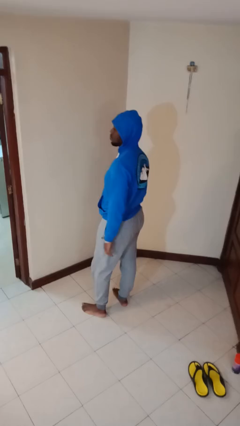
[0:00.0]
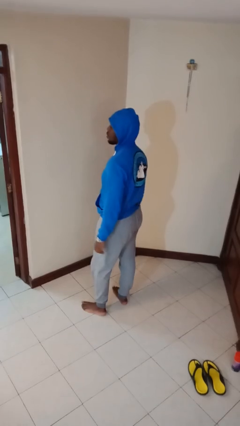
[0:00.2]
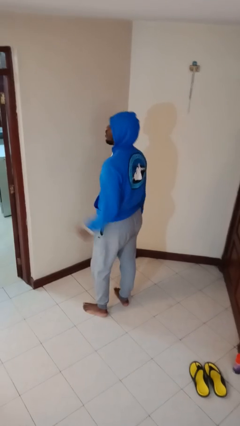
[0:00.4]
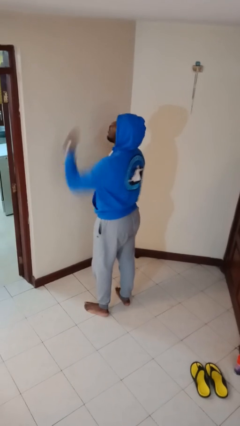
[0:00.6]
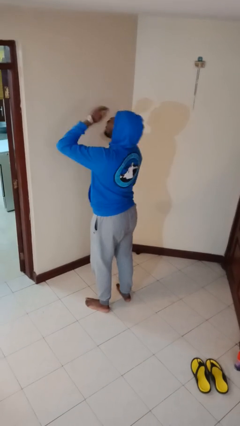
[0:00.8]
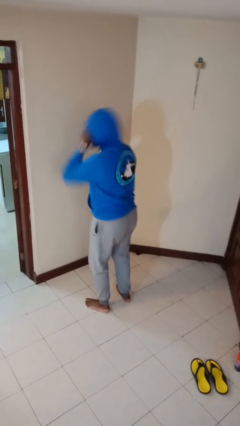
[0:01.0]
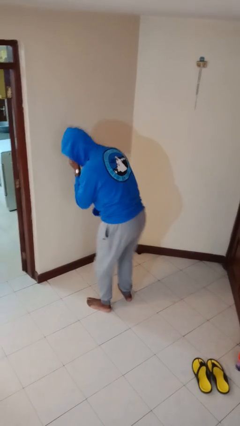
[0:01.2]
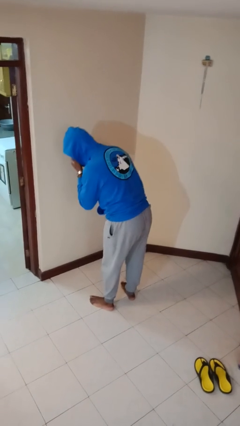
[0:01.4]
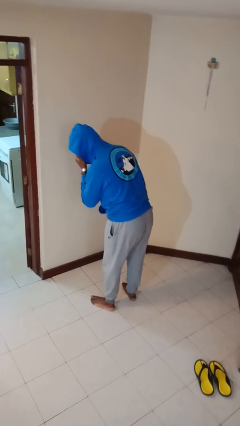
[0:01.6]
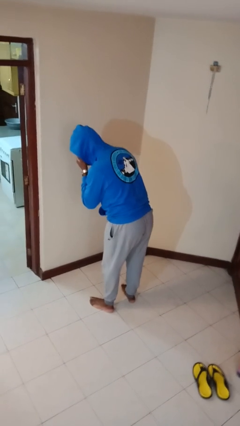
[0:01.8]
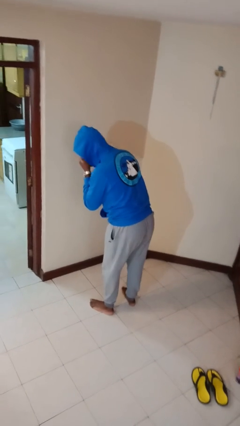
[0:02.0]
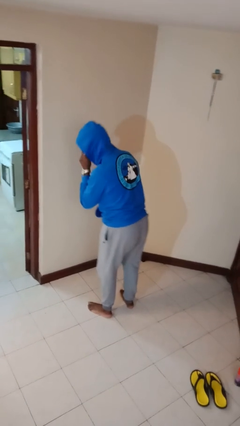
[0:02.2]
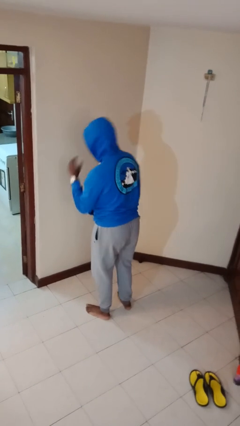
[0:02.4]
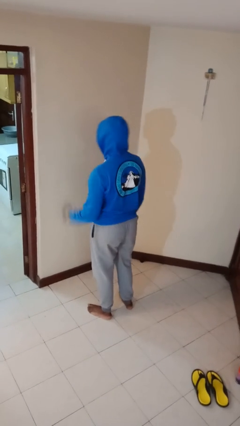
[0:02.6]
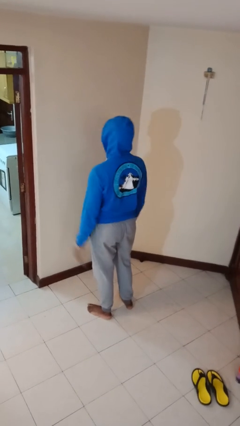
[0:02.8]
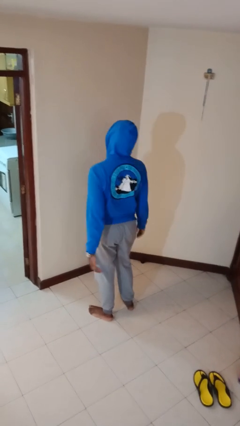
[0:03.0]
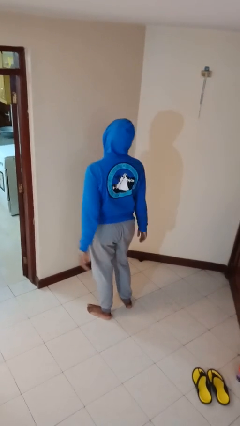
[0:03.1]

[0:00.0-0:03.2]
person sneezes into hand

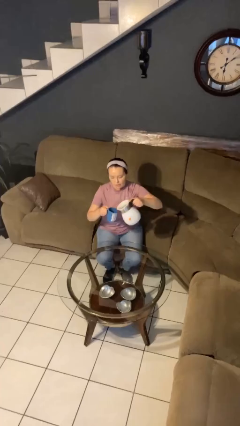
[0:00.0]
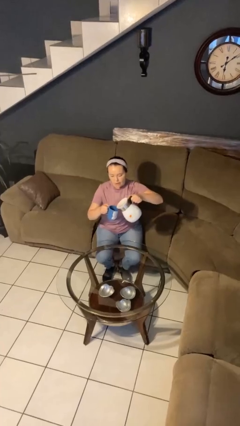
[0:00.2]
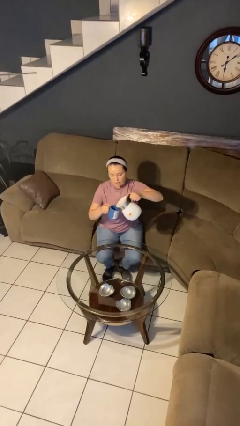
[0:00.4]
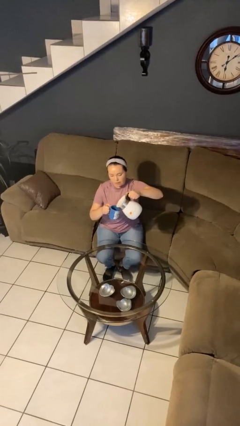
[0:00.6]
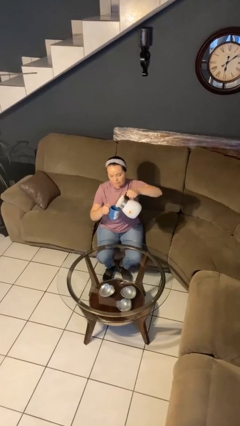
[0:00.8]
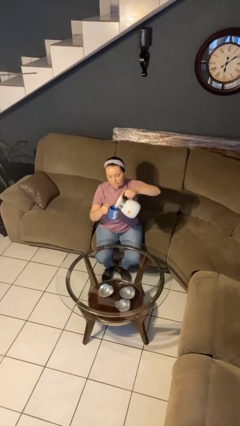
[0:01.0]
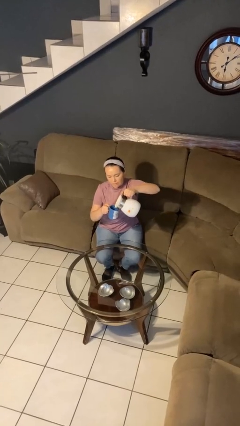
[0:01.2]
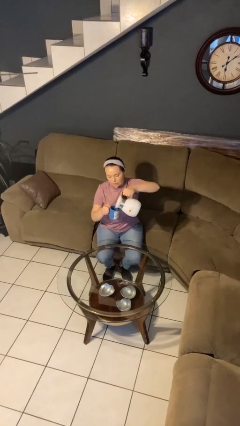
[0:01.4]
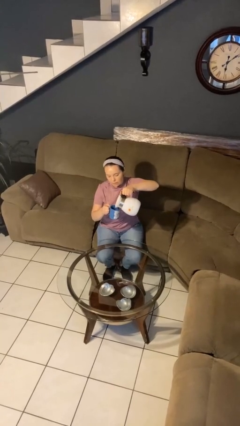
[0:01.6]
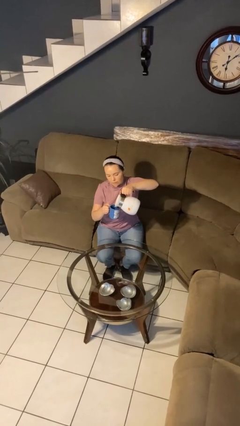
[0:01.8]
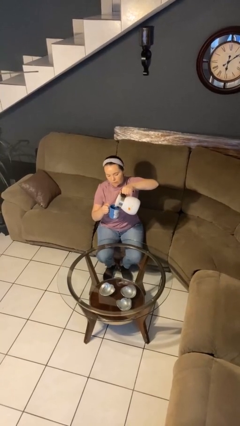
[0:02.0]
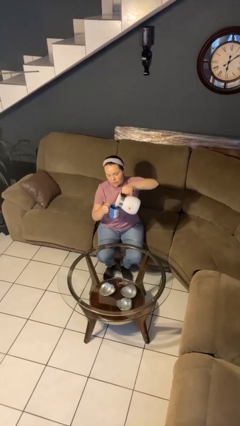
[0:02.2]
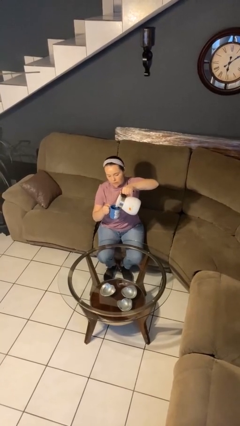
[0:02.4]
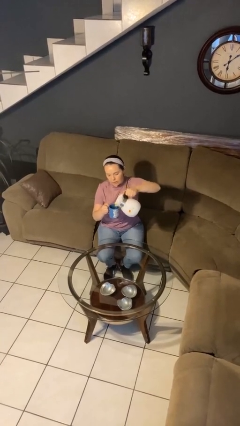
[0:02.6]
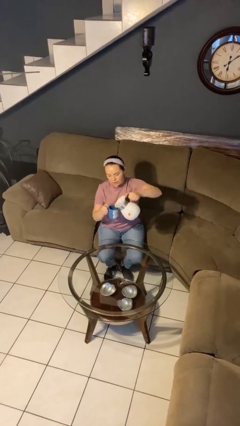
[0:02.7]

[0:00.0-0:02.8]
person pours coffee into mug

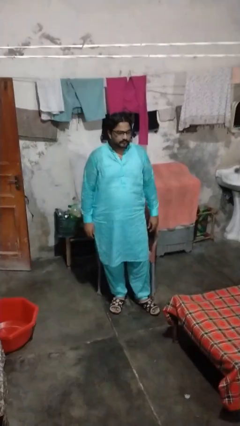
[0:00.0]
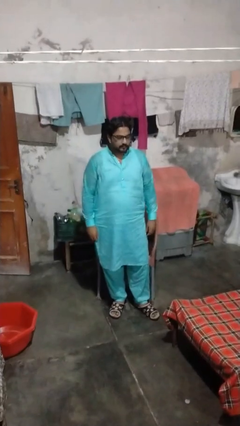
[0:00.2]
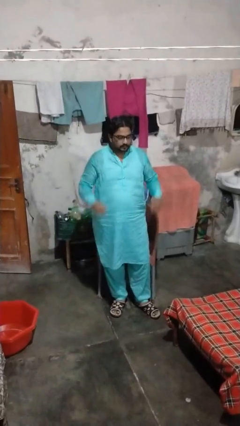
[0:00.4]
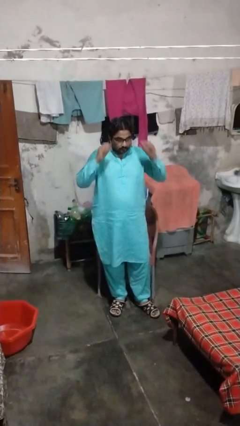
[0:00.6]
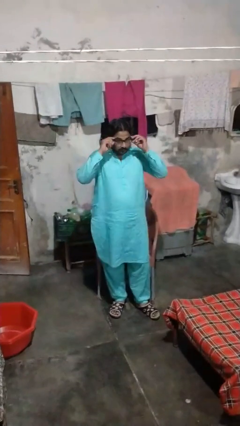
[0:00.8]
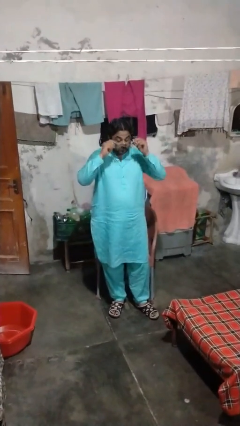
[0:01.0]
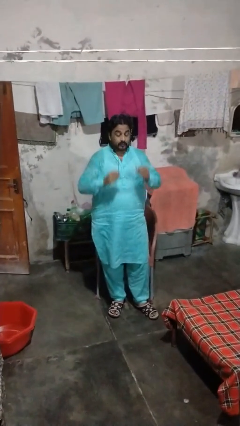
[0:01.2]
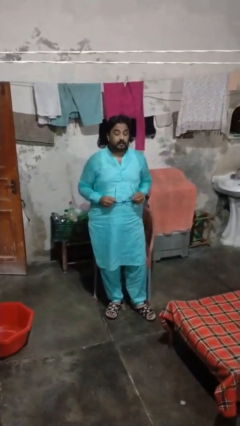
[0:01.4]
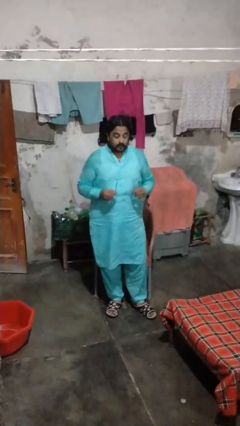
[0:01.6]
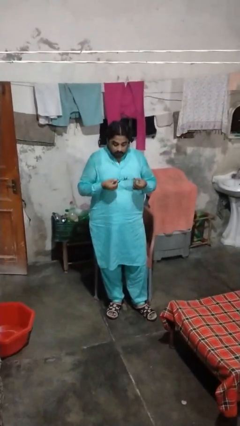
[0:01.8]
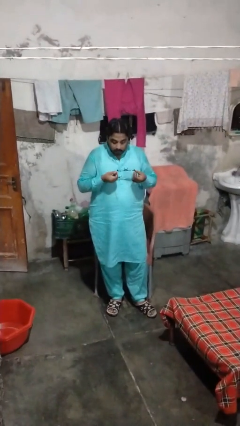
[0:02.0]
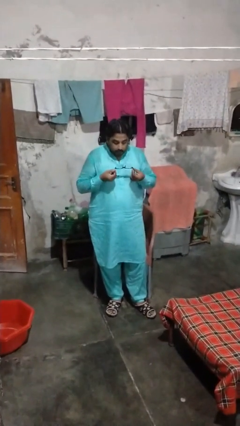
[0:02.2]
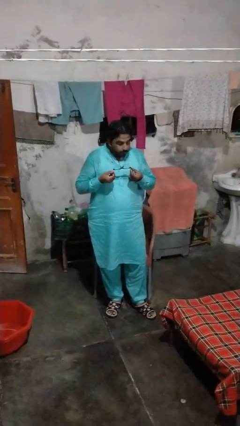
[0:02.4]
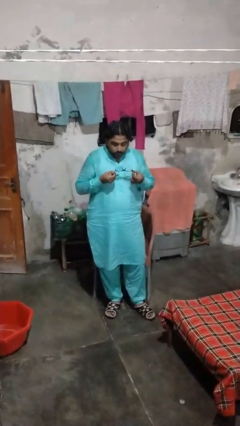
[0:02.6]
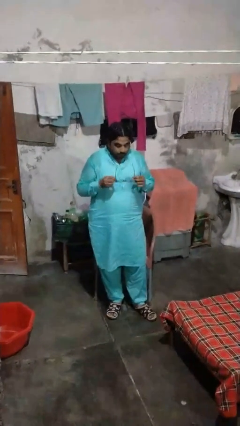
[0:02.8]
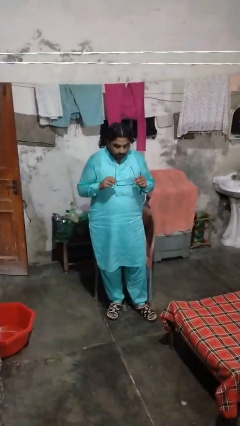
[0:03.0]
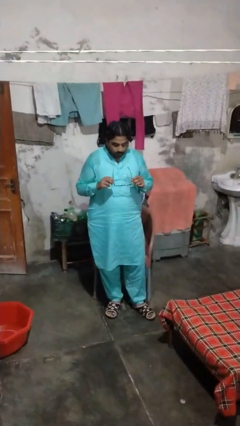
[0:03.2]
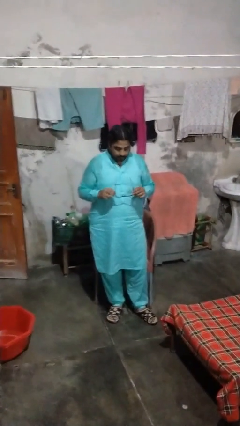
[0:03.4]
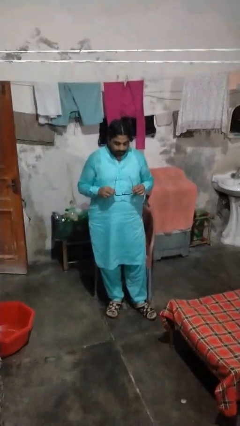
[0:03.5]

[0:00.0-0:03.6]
person takes off glasses

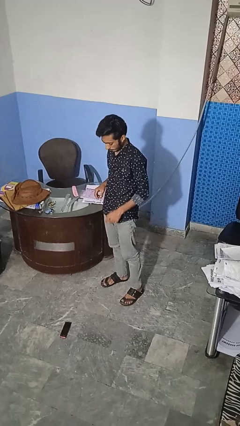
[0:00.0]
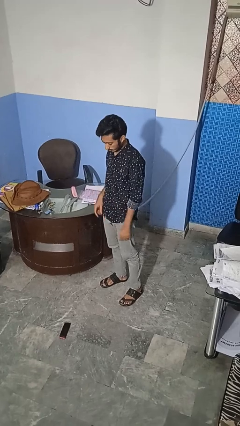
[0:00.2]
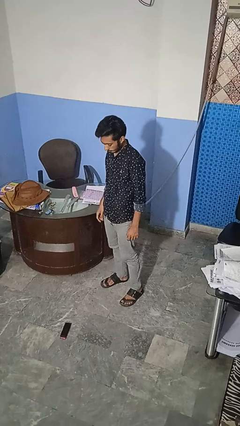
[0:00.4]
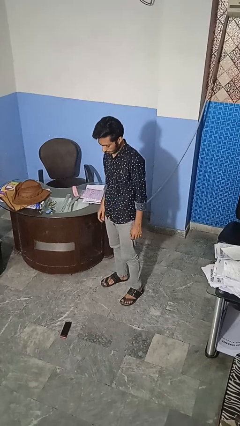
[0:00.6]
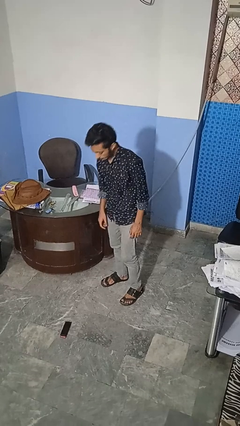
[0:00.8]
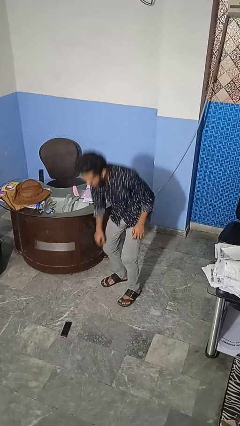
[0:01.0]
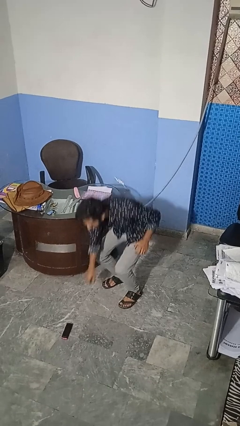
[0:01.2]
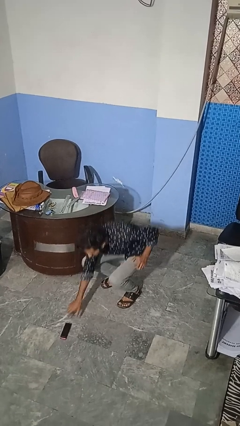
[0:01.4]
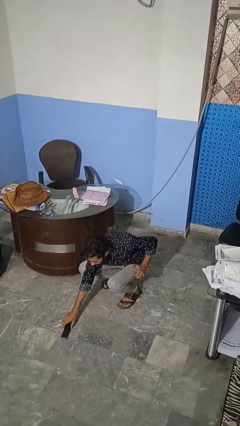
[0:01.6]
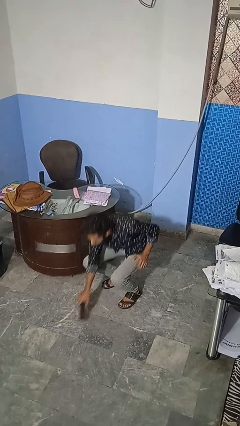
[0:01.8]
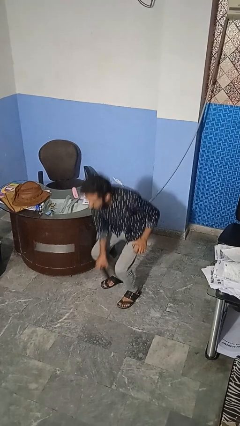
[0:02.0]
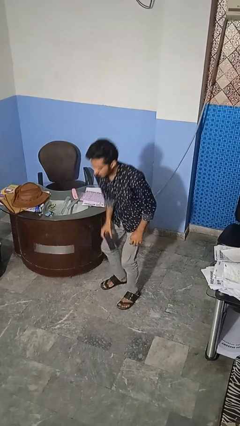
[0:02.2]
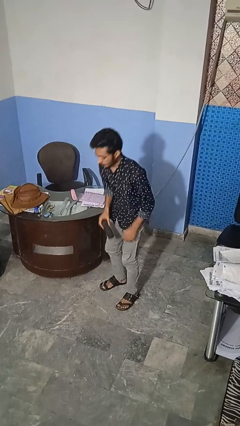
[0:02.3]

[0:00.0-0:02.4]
person picks up object from floor

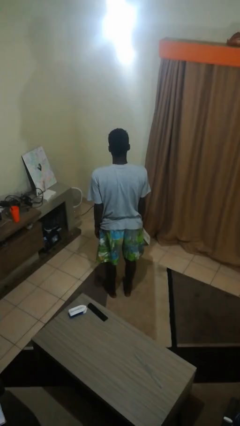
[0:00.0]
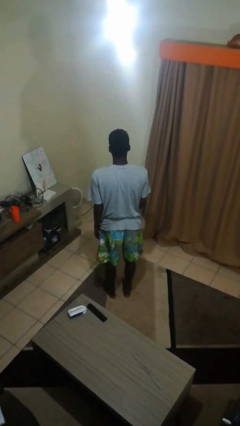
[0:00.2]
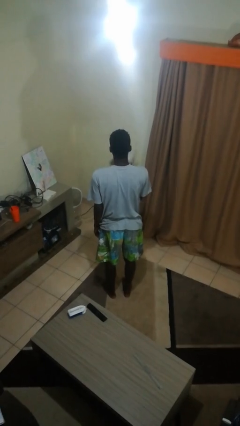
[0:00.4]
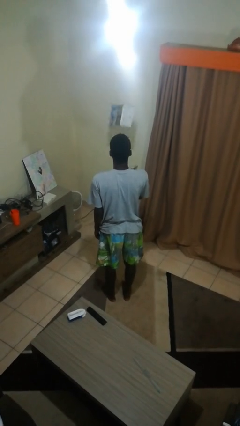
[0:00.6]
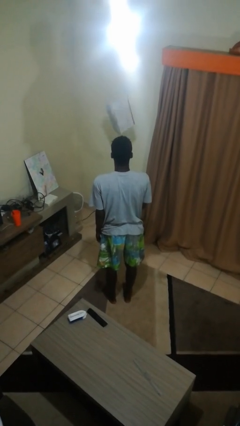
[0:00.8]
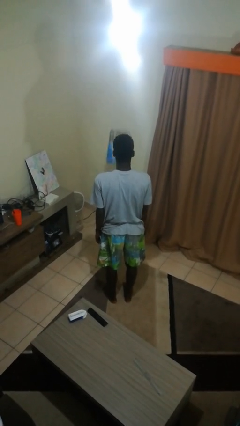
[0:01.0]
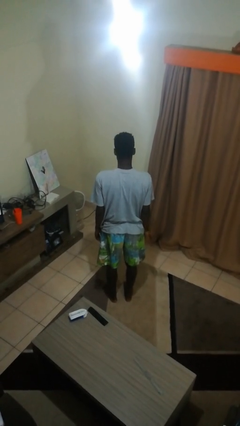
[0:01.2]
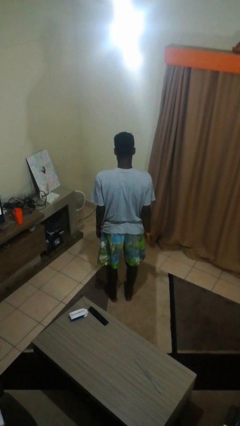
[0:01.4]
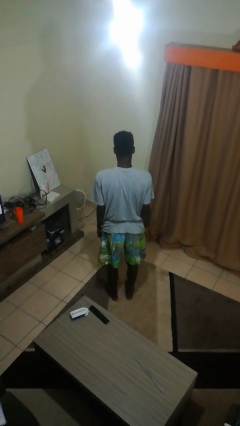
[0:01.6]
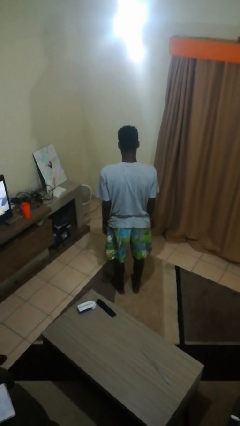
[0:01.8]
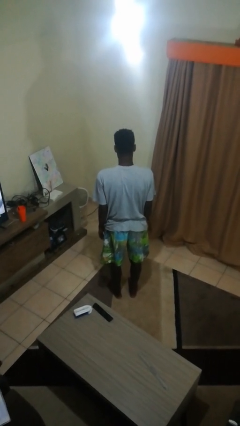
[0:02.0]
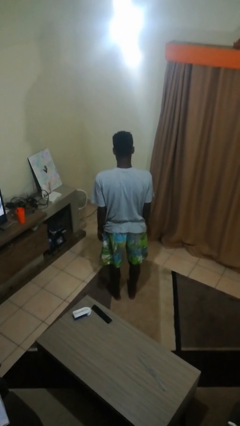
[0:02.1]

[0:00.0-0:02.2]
person throws object into air

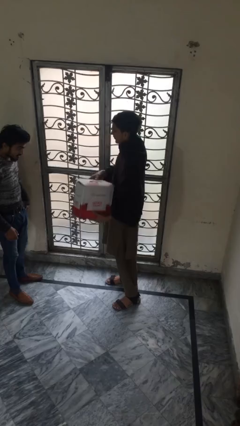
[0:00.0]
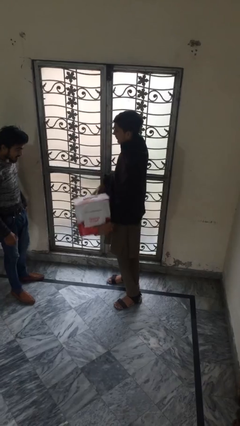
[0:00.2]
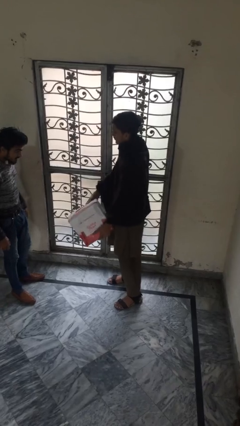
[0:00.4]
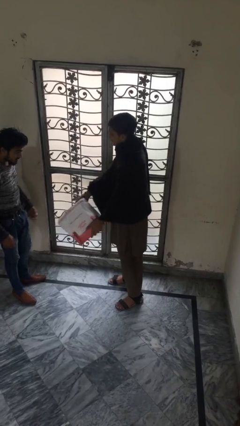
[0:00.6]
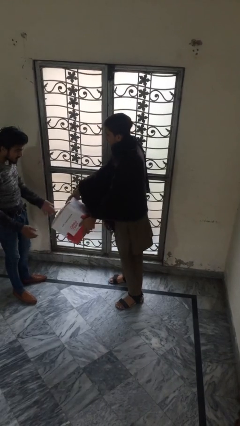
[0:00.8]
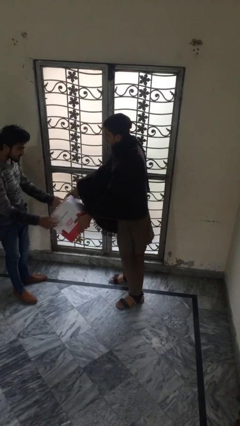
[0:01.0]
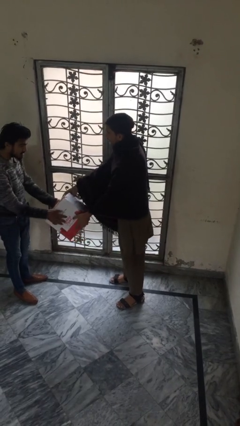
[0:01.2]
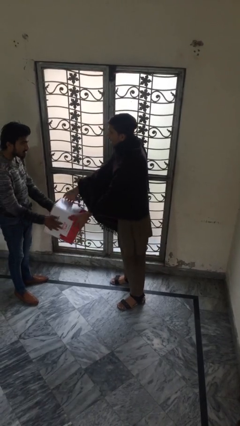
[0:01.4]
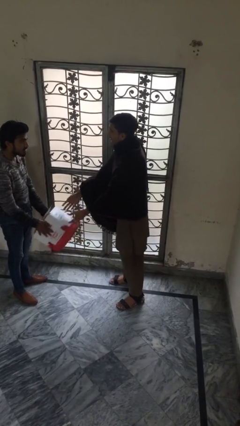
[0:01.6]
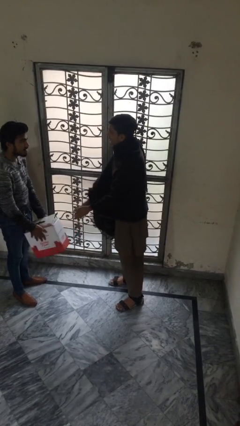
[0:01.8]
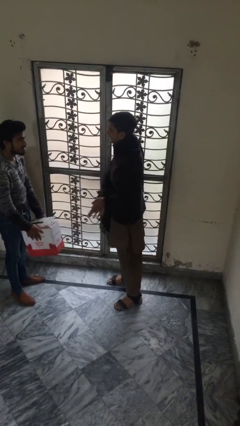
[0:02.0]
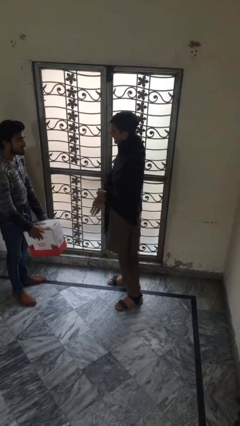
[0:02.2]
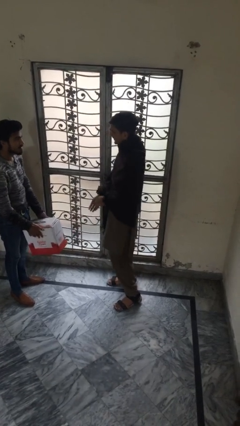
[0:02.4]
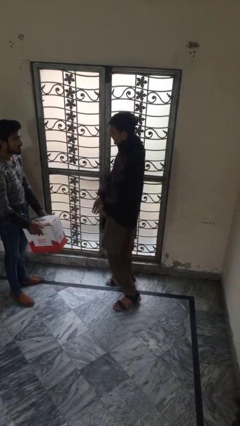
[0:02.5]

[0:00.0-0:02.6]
person transfers object to person

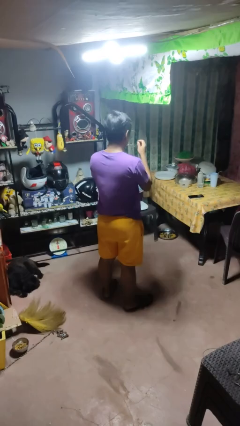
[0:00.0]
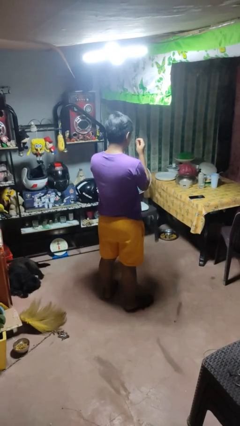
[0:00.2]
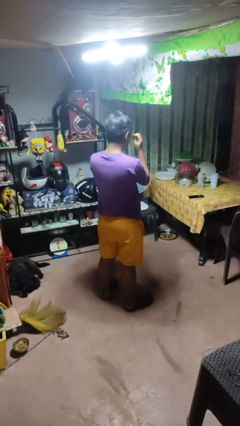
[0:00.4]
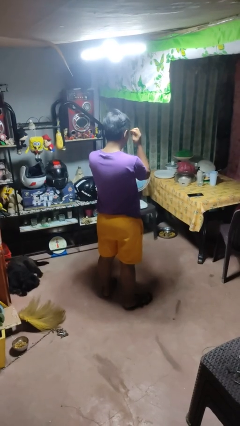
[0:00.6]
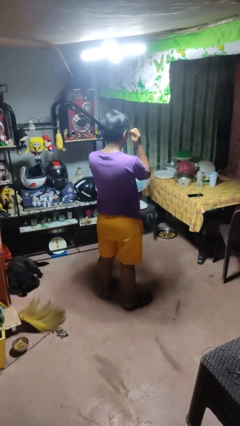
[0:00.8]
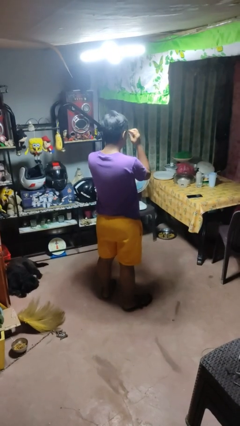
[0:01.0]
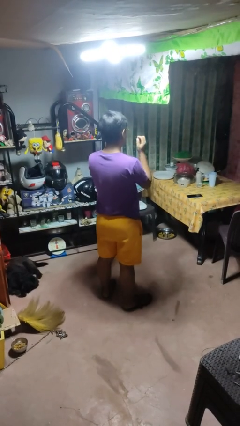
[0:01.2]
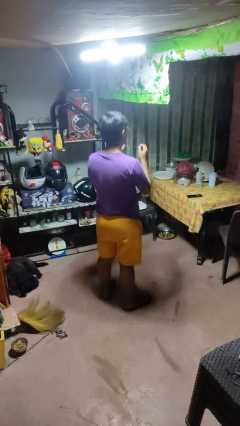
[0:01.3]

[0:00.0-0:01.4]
person puts on glasses
